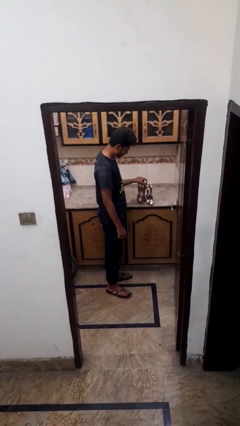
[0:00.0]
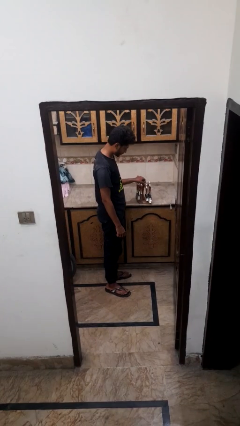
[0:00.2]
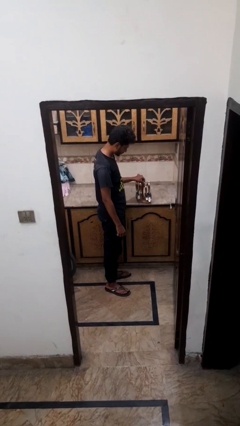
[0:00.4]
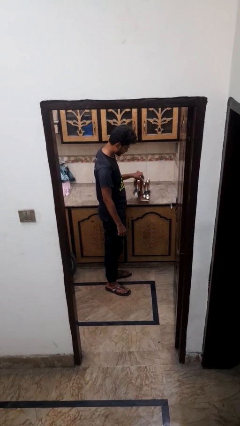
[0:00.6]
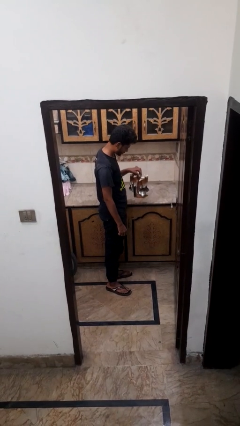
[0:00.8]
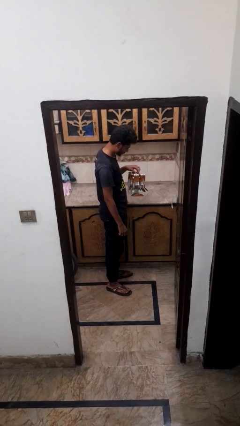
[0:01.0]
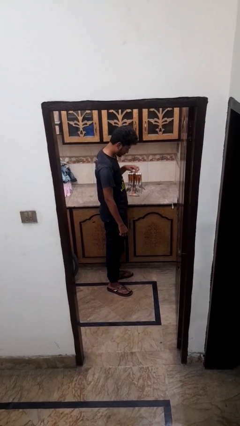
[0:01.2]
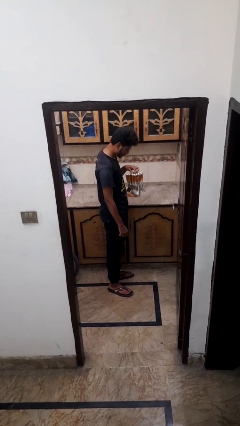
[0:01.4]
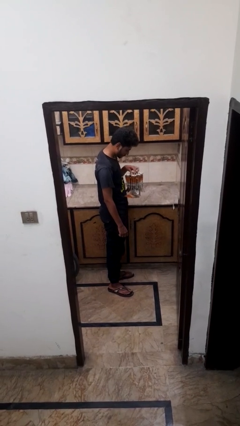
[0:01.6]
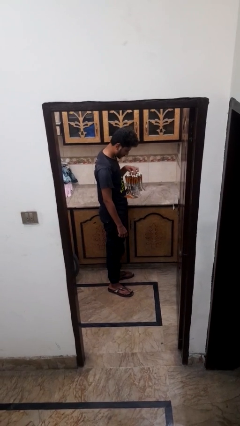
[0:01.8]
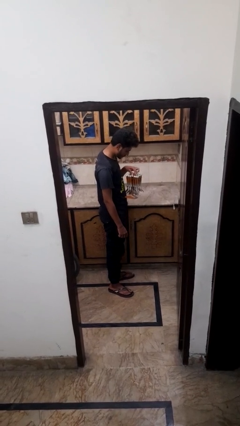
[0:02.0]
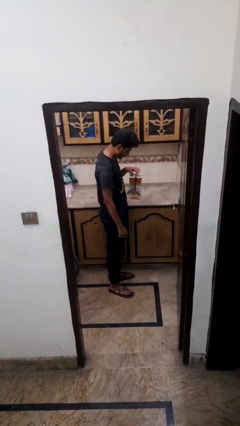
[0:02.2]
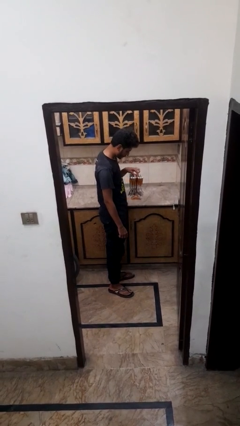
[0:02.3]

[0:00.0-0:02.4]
person picks up object from countertop

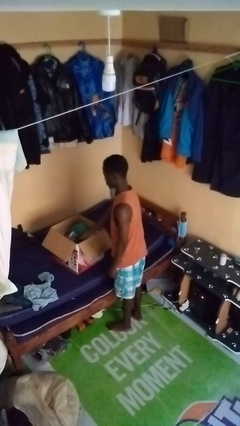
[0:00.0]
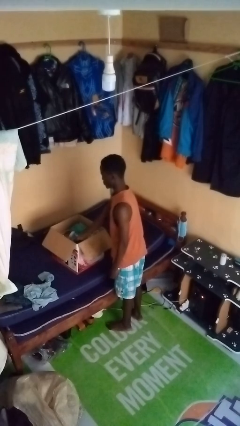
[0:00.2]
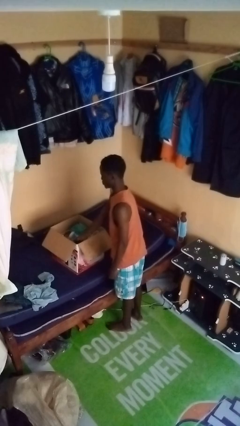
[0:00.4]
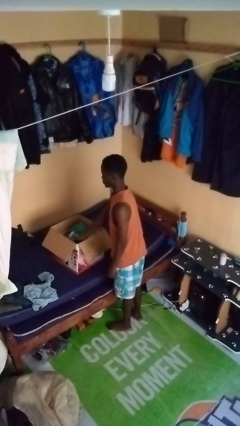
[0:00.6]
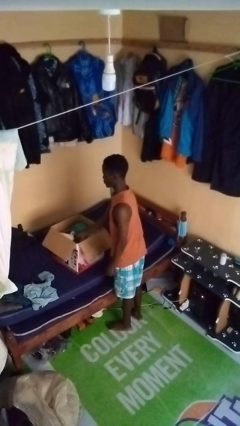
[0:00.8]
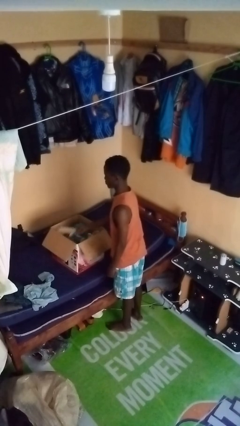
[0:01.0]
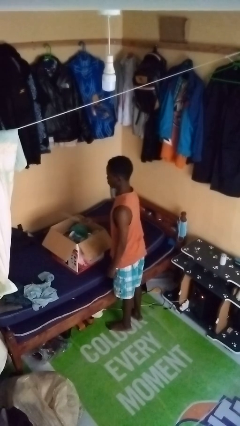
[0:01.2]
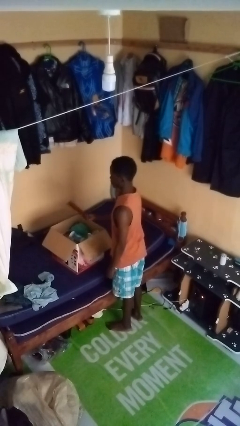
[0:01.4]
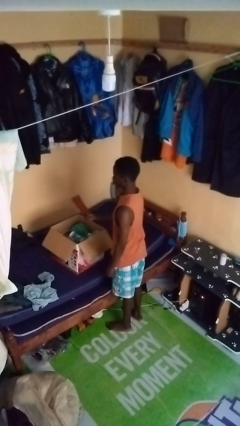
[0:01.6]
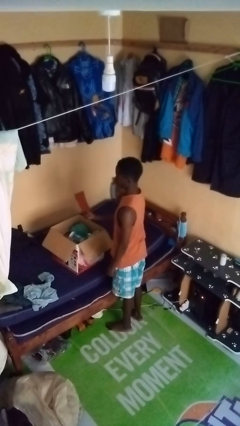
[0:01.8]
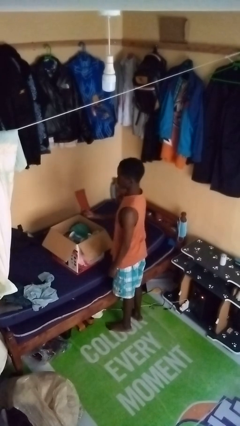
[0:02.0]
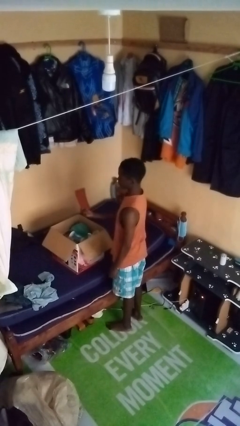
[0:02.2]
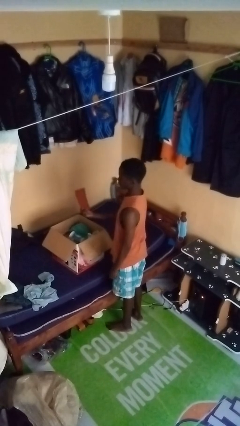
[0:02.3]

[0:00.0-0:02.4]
person takes object from box

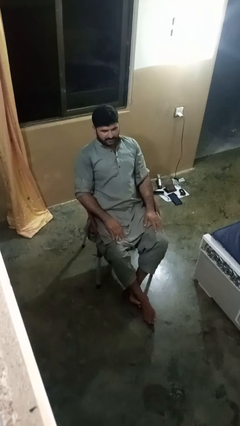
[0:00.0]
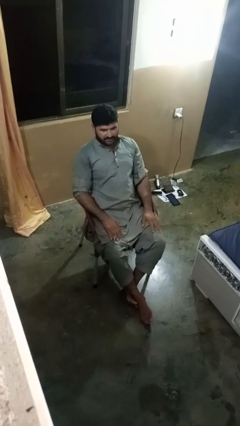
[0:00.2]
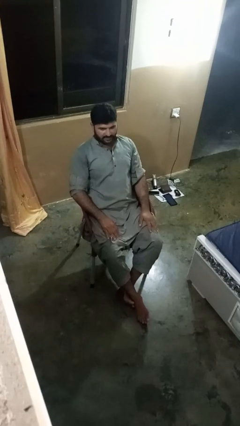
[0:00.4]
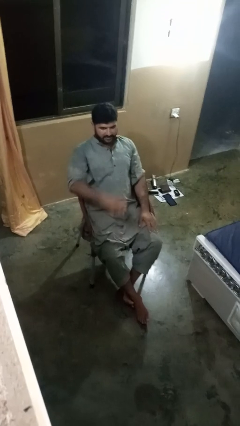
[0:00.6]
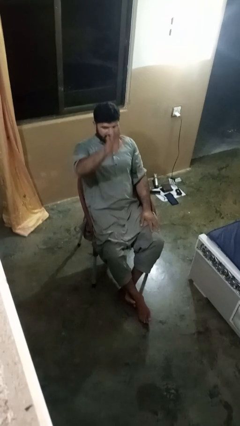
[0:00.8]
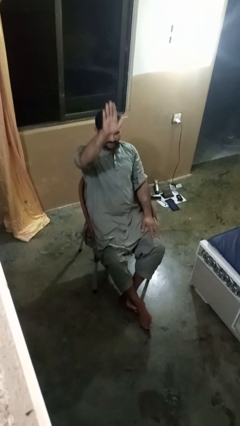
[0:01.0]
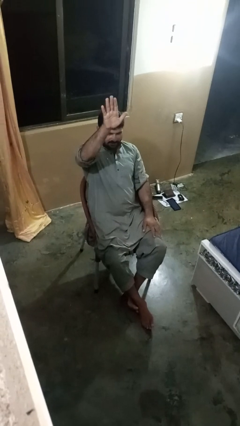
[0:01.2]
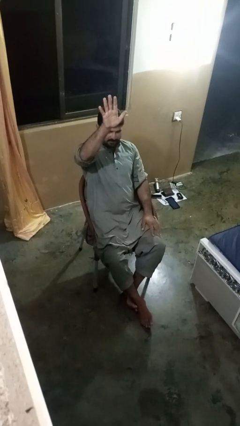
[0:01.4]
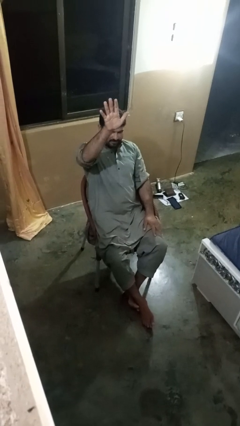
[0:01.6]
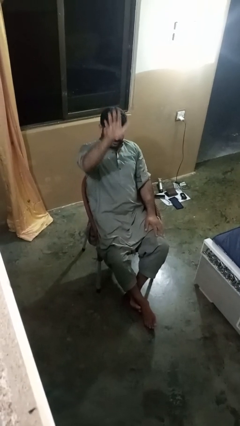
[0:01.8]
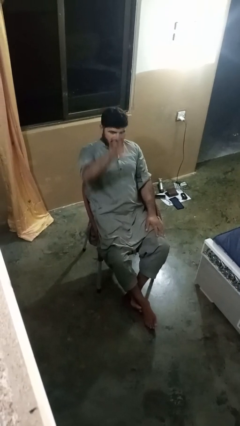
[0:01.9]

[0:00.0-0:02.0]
person gestures number five

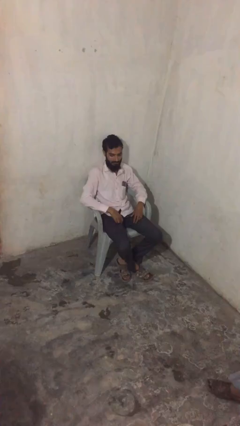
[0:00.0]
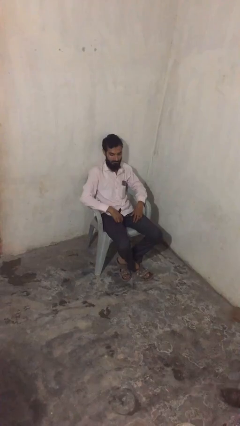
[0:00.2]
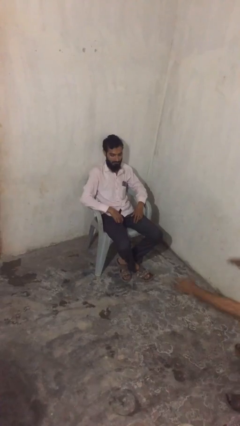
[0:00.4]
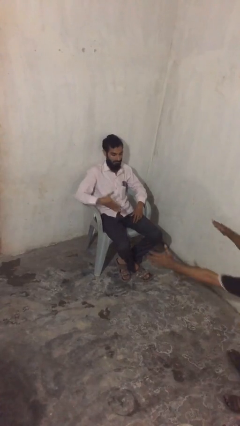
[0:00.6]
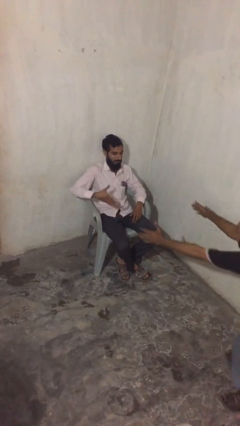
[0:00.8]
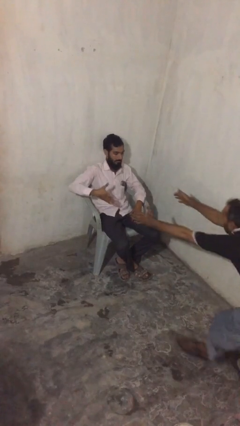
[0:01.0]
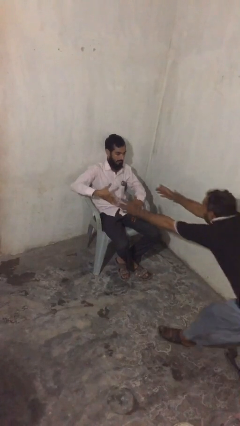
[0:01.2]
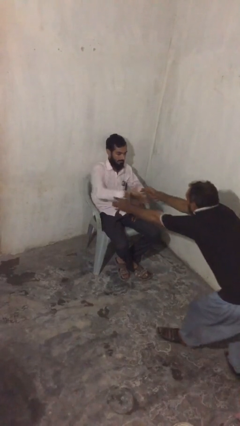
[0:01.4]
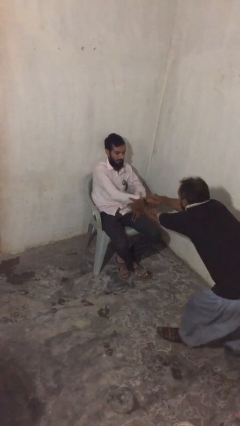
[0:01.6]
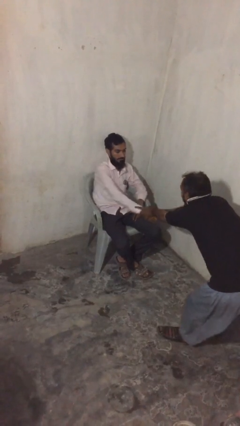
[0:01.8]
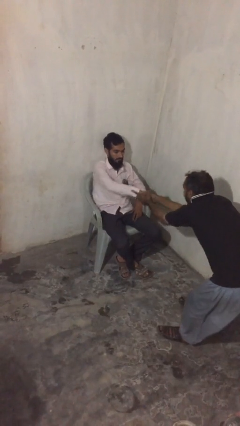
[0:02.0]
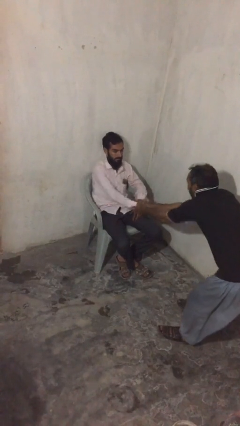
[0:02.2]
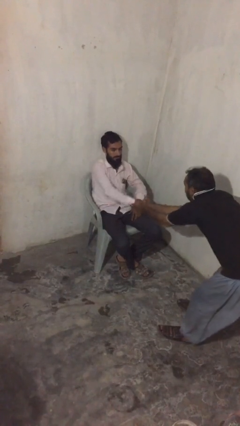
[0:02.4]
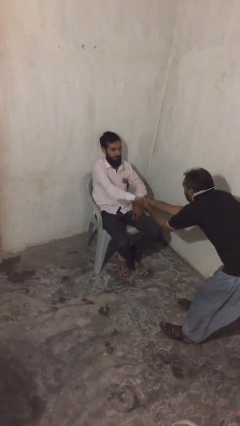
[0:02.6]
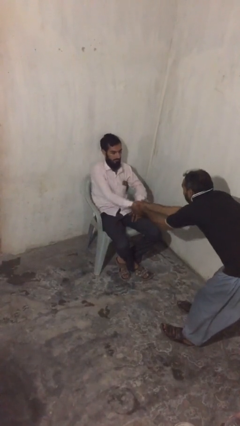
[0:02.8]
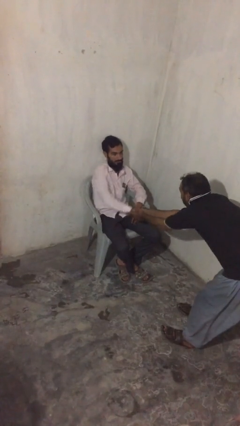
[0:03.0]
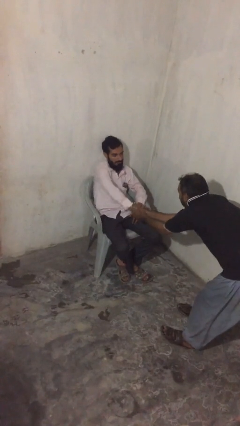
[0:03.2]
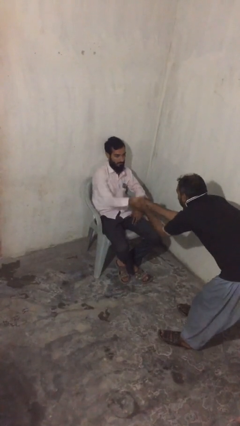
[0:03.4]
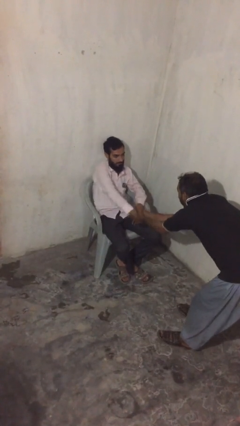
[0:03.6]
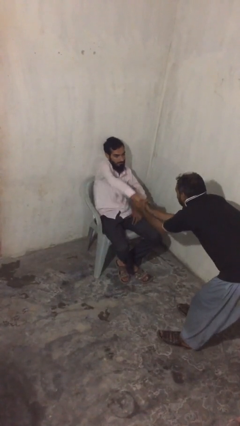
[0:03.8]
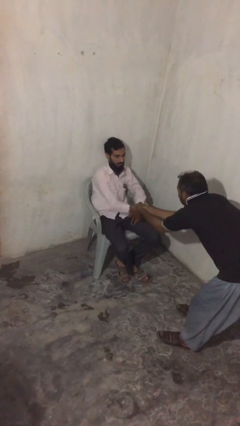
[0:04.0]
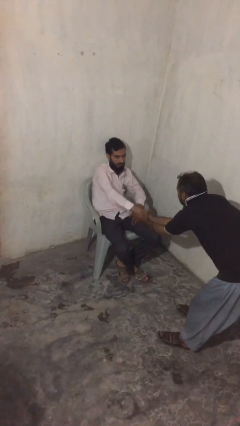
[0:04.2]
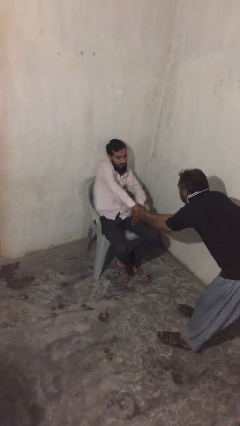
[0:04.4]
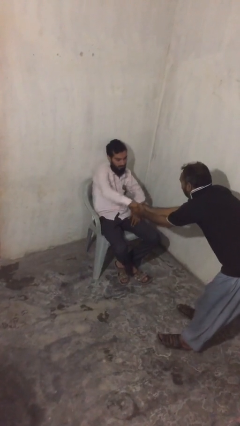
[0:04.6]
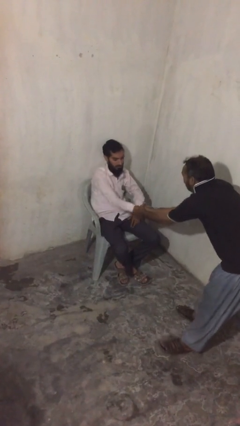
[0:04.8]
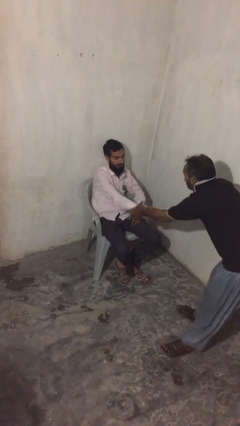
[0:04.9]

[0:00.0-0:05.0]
person shakes hand

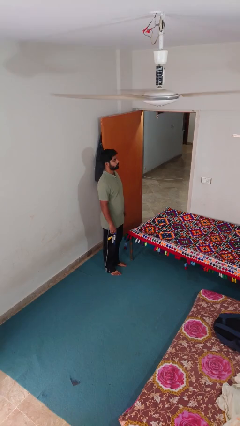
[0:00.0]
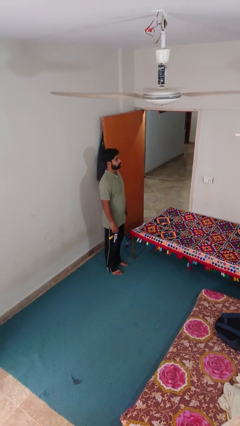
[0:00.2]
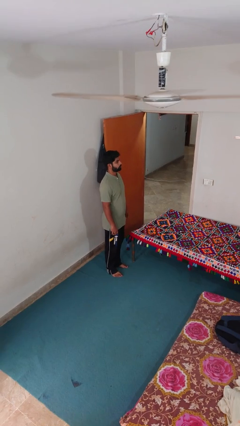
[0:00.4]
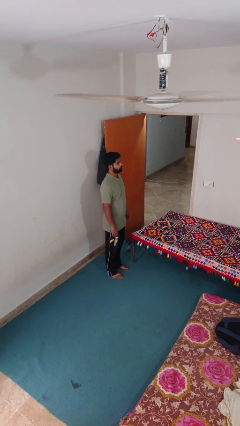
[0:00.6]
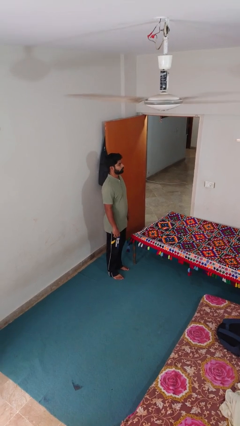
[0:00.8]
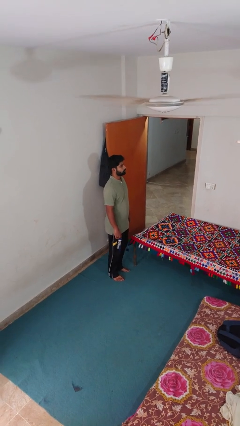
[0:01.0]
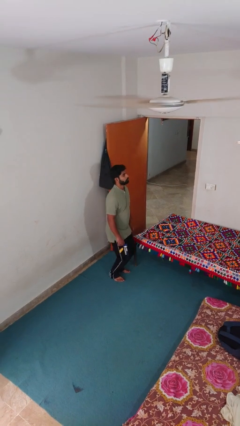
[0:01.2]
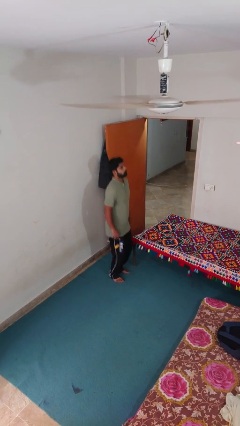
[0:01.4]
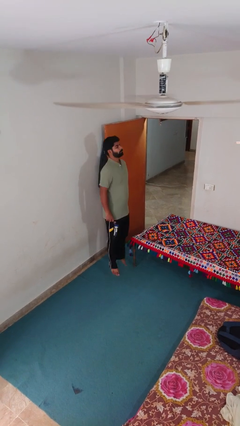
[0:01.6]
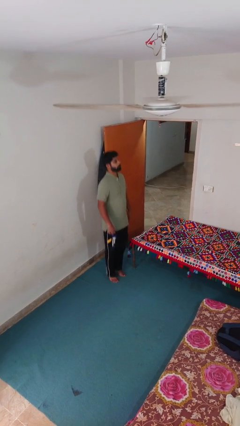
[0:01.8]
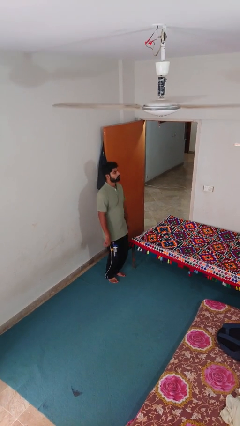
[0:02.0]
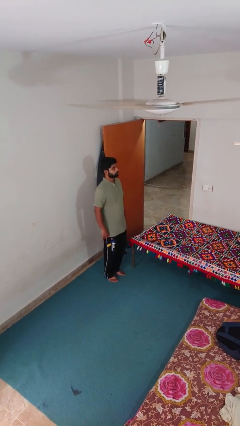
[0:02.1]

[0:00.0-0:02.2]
person jumps

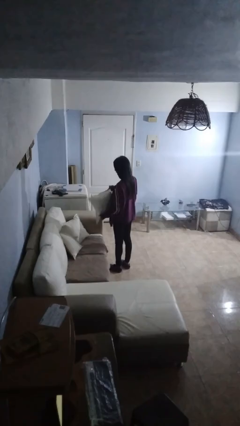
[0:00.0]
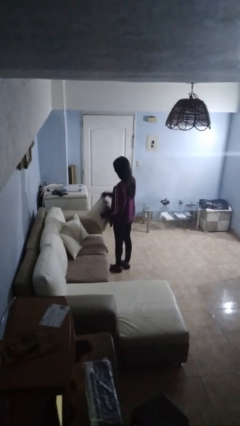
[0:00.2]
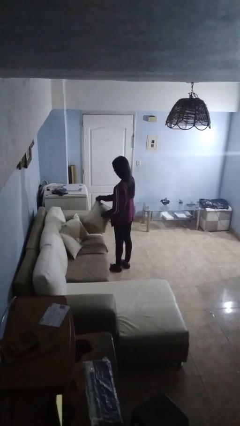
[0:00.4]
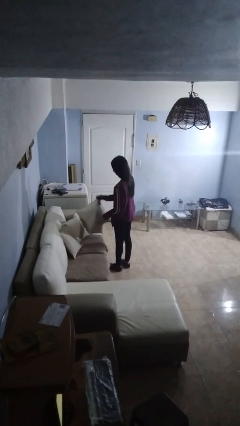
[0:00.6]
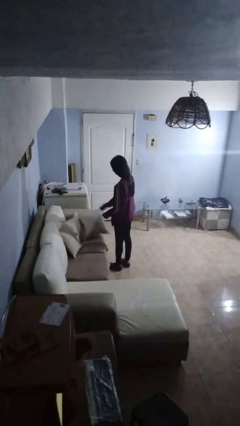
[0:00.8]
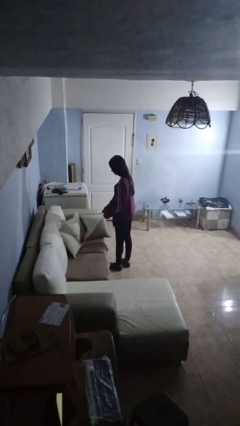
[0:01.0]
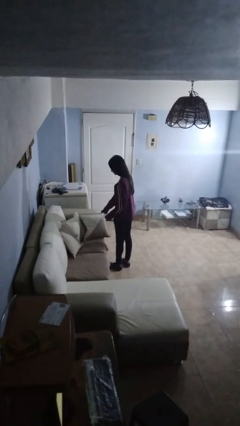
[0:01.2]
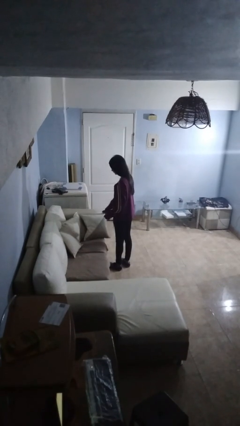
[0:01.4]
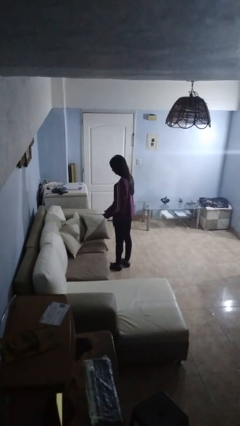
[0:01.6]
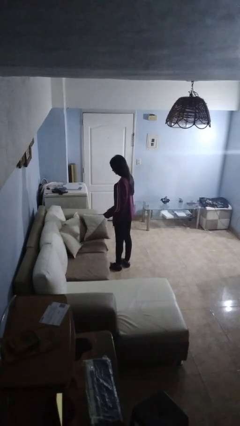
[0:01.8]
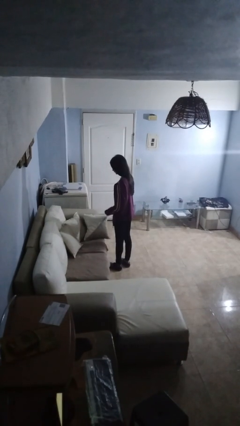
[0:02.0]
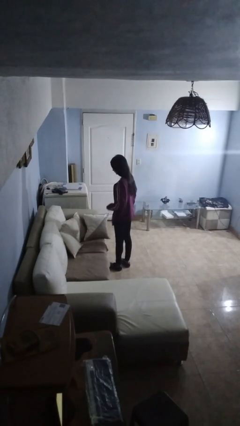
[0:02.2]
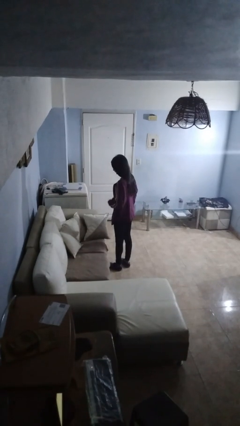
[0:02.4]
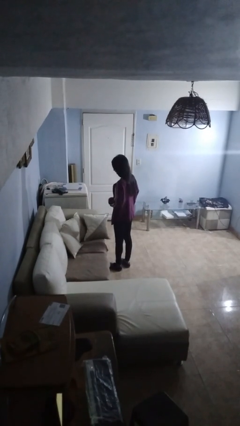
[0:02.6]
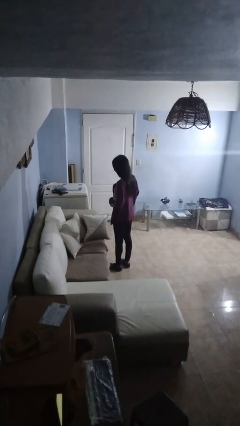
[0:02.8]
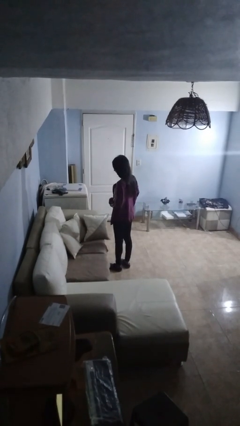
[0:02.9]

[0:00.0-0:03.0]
person picks up object from couch

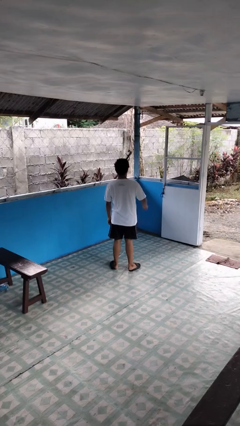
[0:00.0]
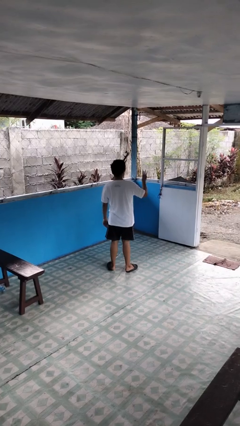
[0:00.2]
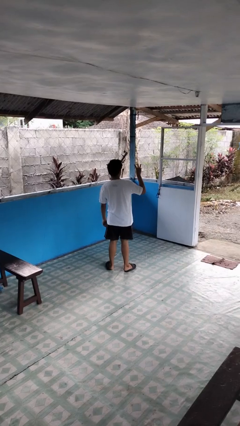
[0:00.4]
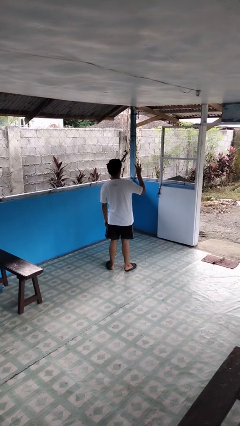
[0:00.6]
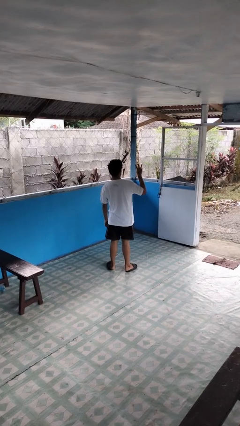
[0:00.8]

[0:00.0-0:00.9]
person gestures number three
